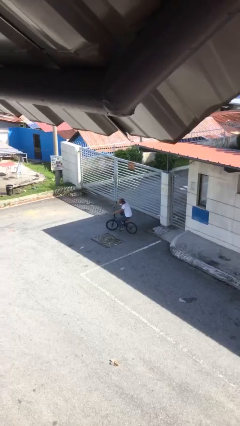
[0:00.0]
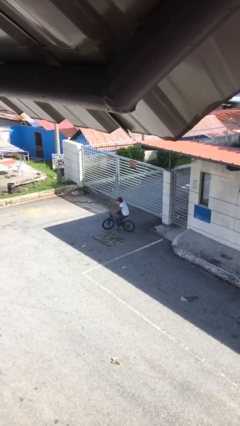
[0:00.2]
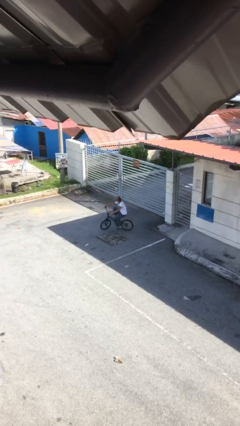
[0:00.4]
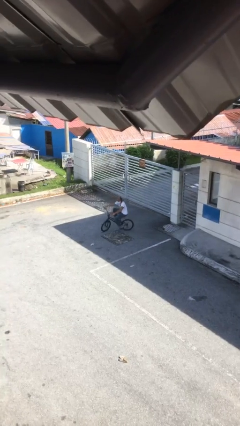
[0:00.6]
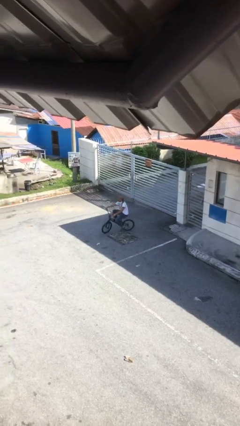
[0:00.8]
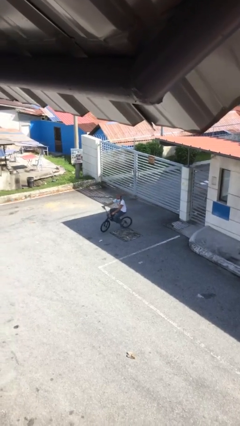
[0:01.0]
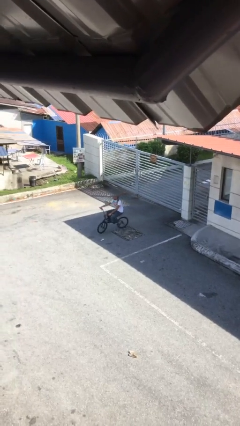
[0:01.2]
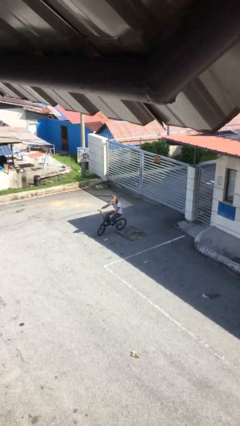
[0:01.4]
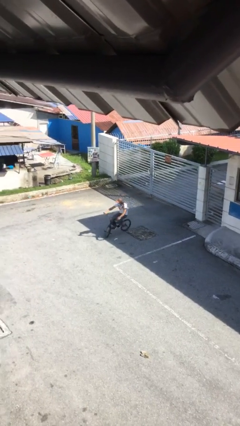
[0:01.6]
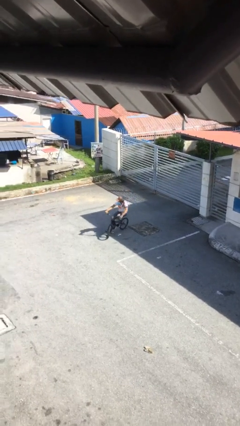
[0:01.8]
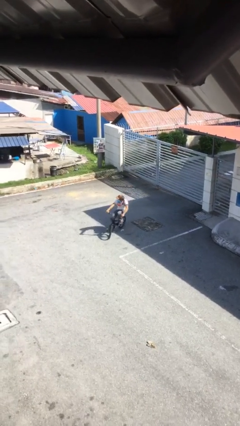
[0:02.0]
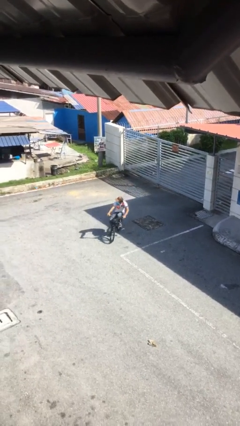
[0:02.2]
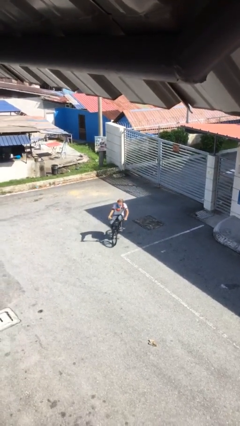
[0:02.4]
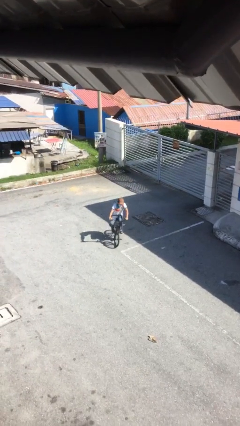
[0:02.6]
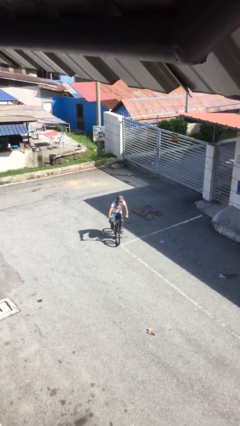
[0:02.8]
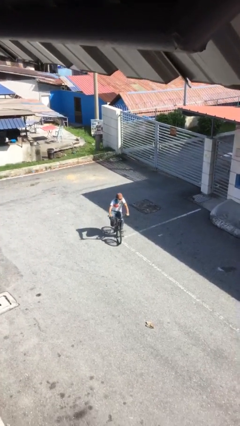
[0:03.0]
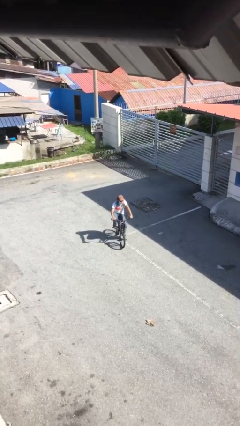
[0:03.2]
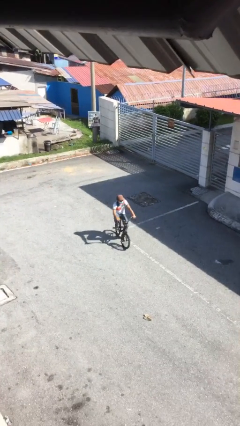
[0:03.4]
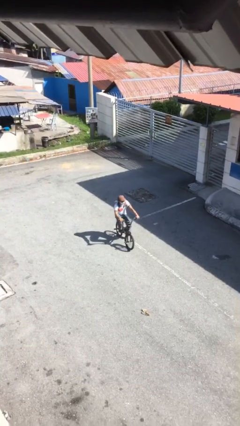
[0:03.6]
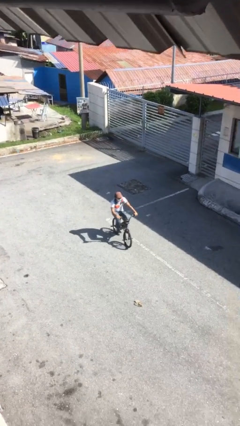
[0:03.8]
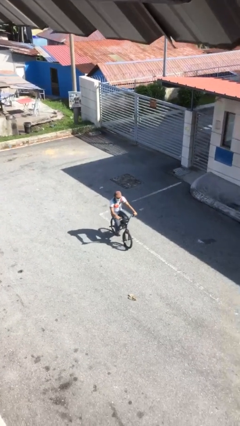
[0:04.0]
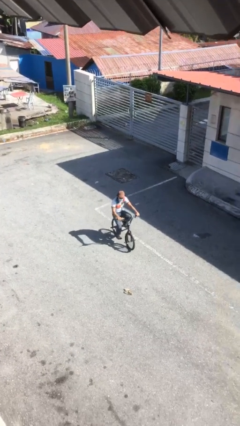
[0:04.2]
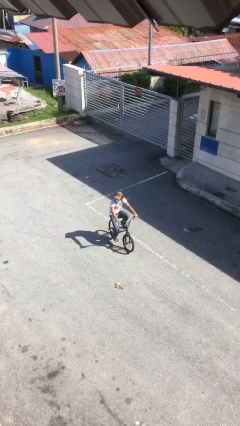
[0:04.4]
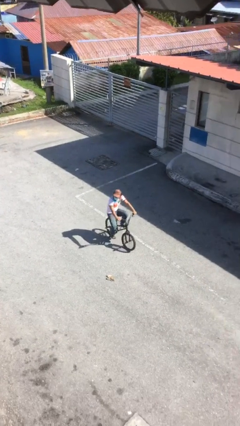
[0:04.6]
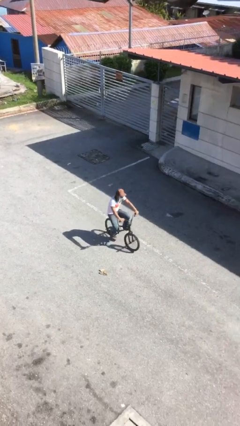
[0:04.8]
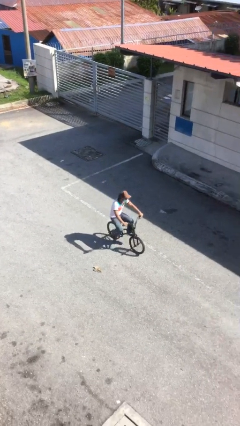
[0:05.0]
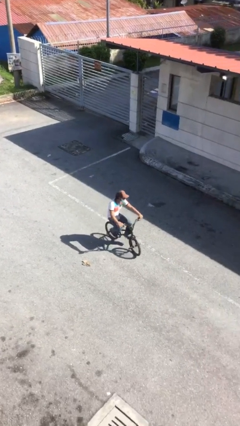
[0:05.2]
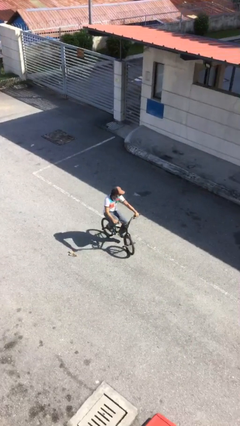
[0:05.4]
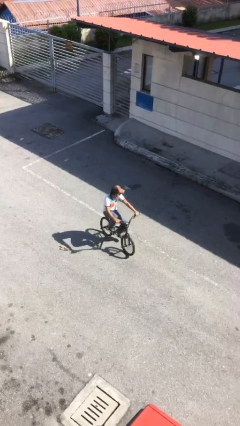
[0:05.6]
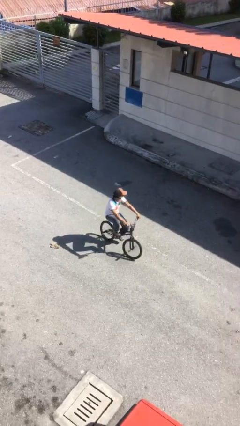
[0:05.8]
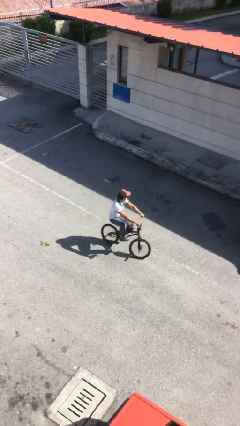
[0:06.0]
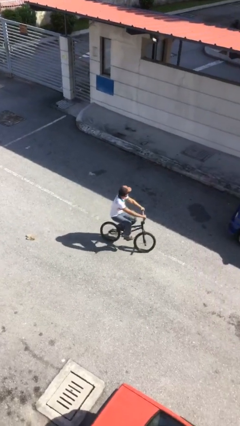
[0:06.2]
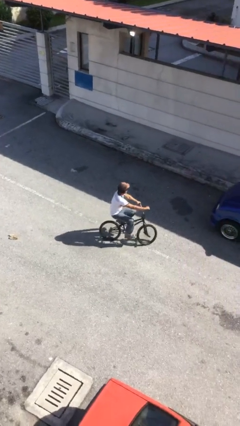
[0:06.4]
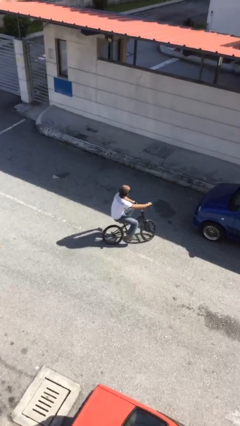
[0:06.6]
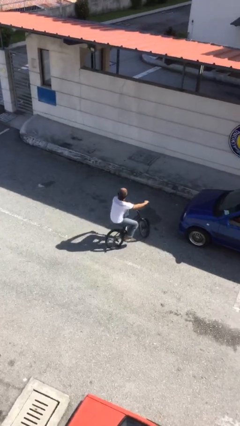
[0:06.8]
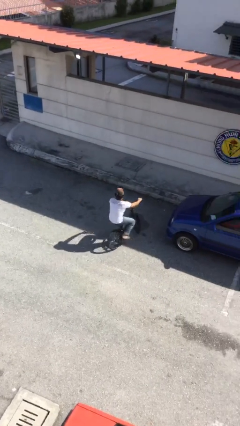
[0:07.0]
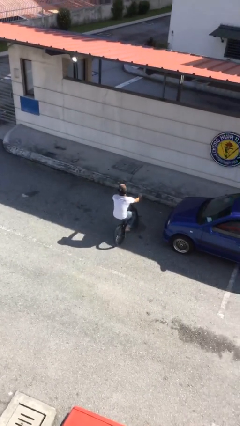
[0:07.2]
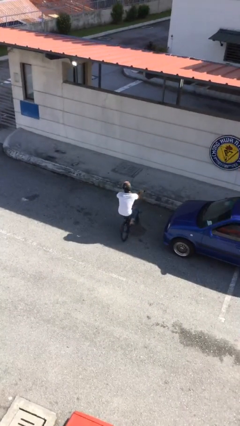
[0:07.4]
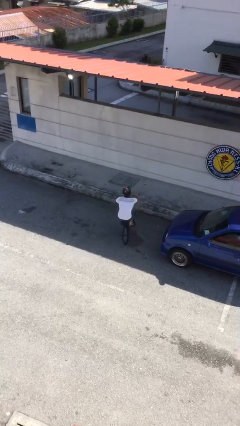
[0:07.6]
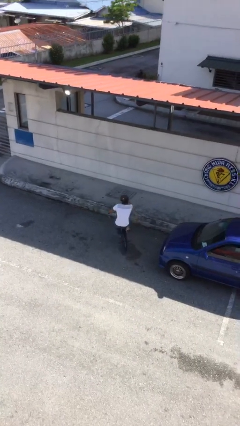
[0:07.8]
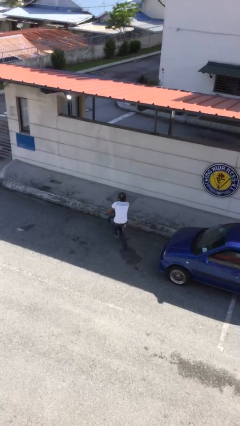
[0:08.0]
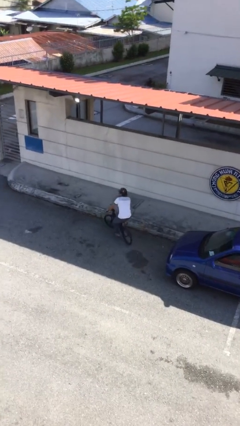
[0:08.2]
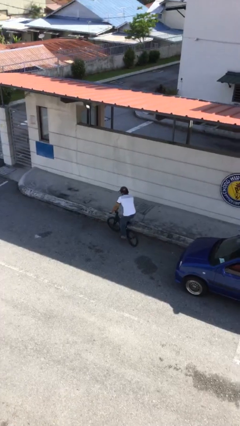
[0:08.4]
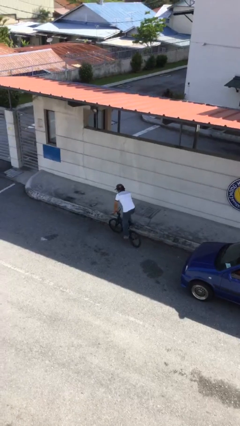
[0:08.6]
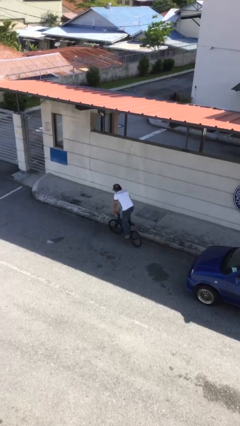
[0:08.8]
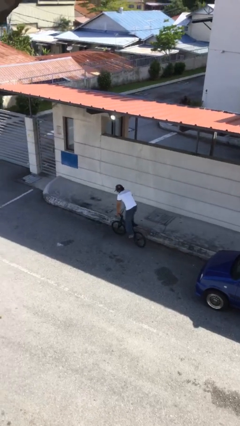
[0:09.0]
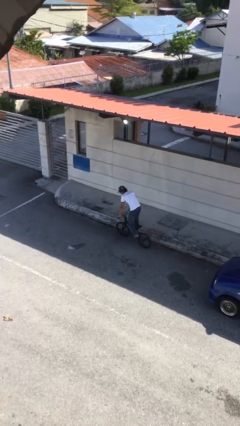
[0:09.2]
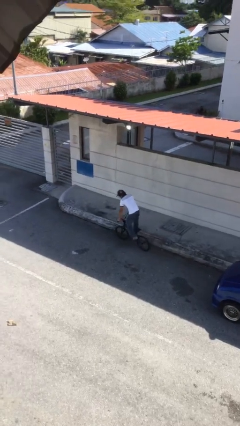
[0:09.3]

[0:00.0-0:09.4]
person rides bicycle

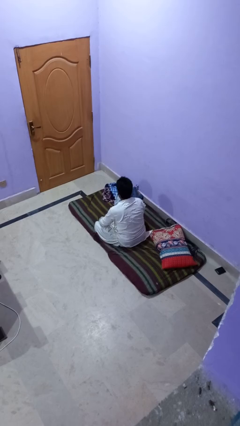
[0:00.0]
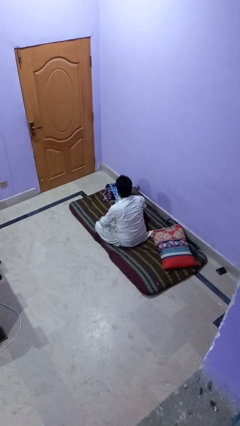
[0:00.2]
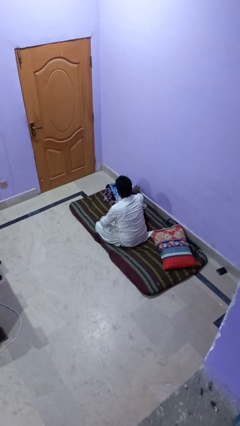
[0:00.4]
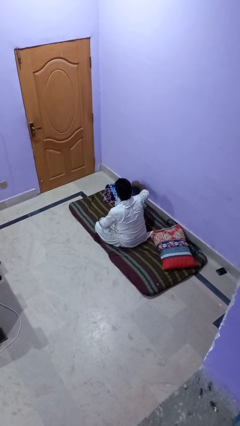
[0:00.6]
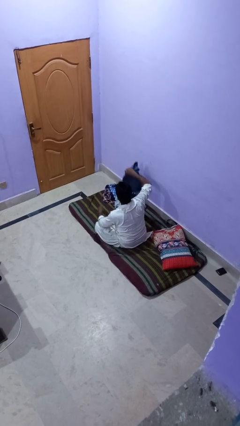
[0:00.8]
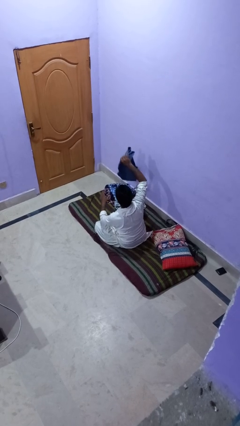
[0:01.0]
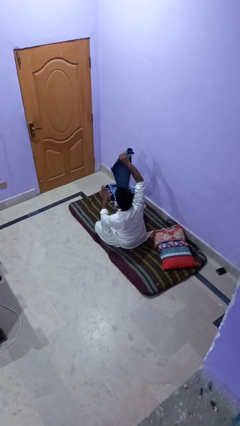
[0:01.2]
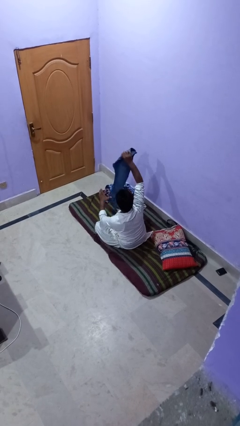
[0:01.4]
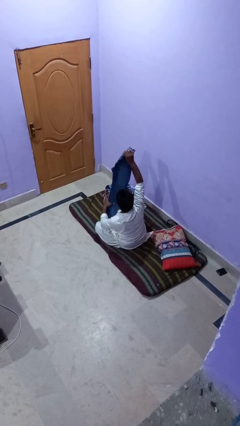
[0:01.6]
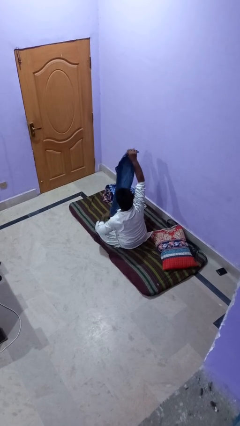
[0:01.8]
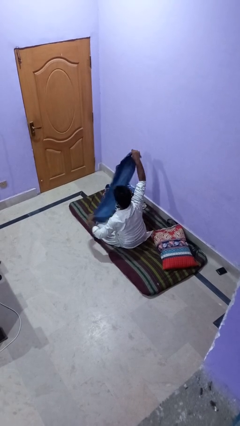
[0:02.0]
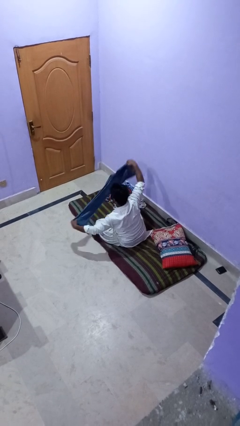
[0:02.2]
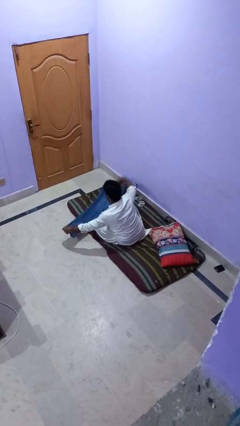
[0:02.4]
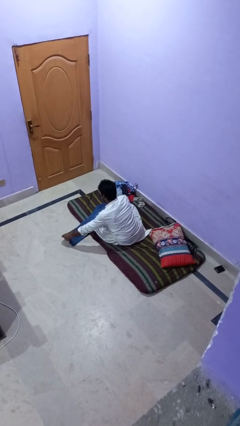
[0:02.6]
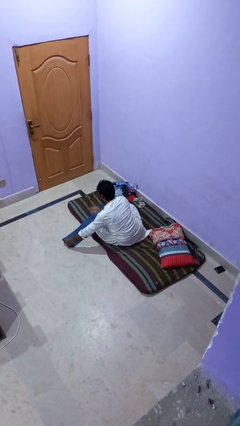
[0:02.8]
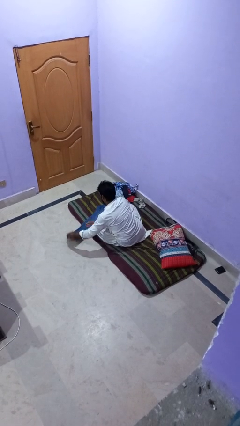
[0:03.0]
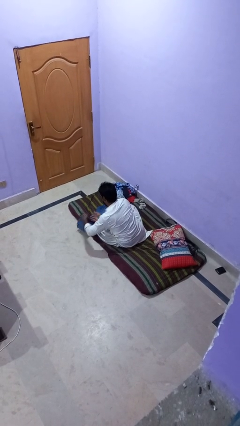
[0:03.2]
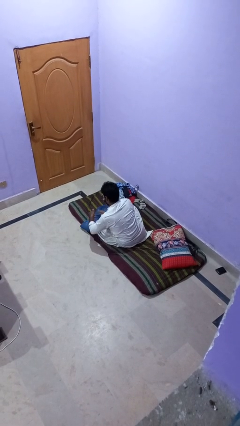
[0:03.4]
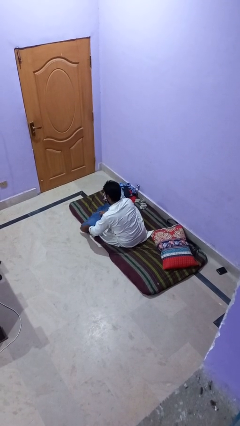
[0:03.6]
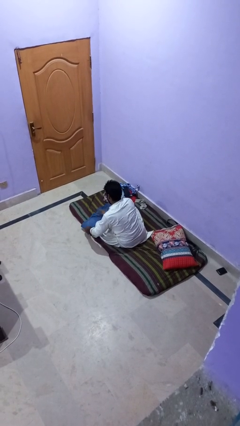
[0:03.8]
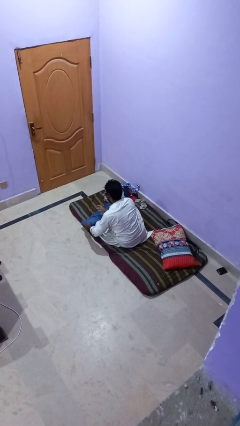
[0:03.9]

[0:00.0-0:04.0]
person folds pants

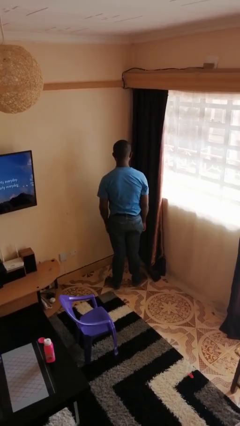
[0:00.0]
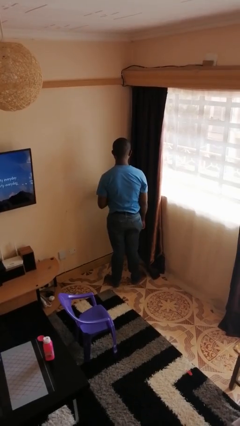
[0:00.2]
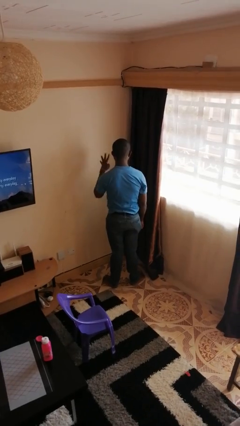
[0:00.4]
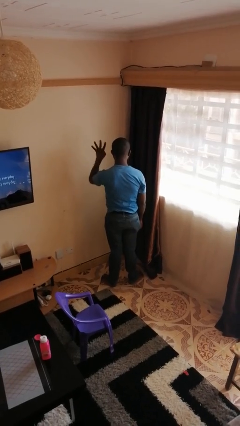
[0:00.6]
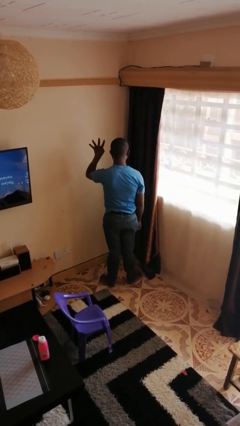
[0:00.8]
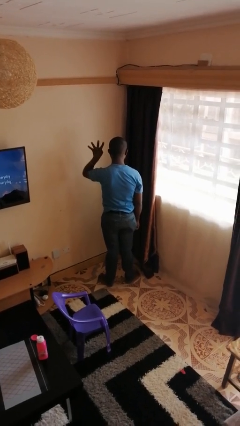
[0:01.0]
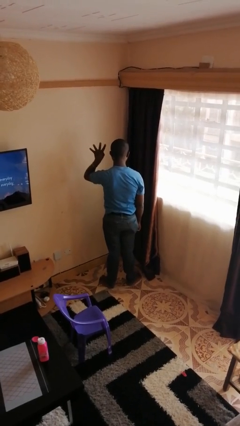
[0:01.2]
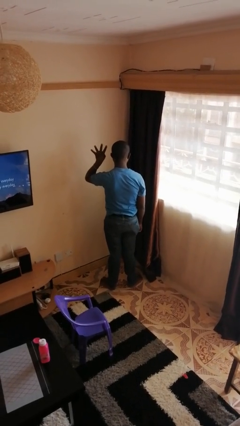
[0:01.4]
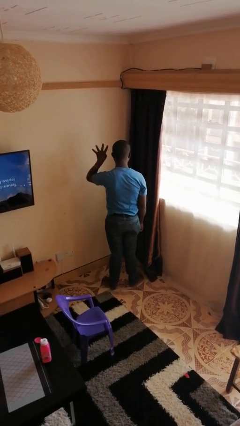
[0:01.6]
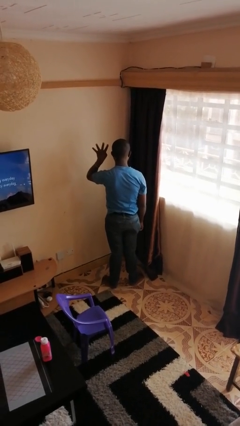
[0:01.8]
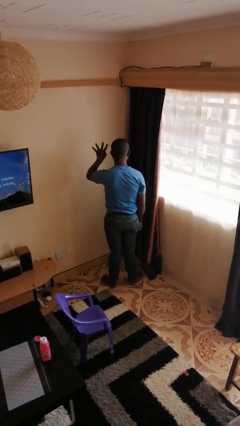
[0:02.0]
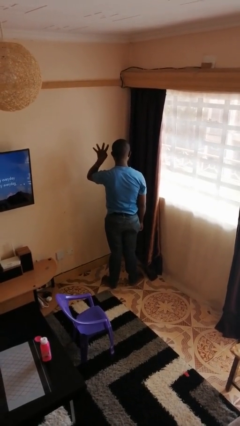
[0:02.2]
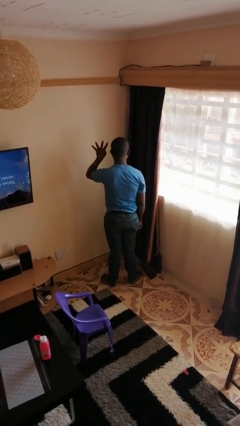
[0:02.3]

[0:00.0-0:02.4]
person gestures number four

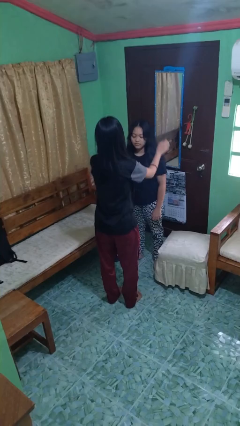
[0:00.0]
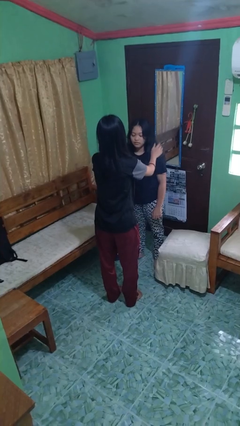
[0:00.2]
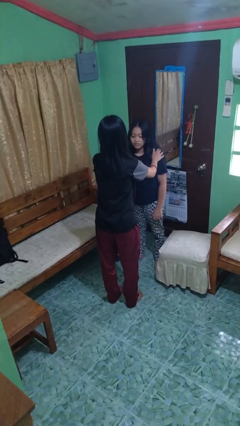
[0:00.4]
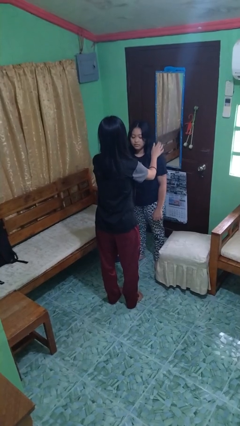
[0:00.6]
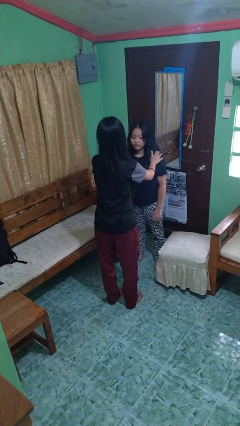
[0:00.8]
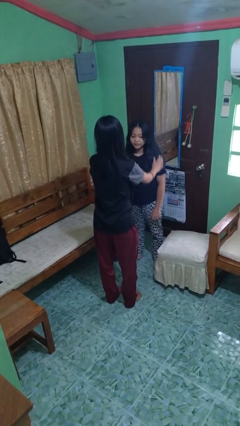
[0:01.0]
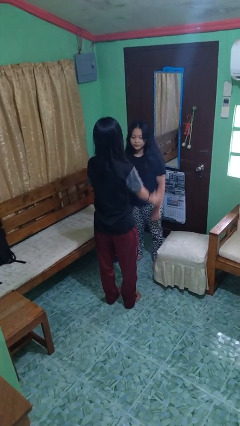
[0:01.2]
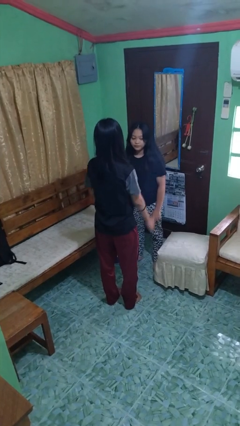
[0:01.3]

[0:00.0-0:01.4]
person pounds shoulders of person

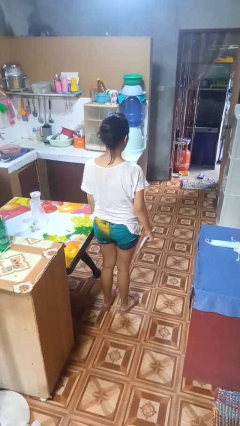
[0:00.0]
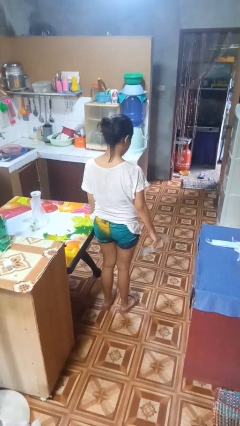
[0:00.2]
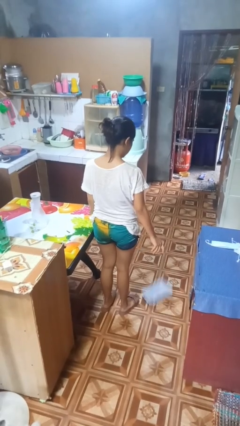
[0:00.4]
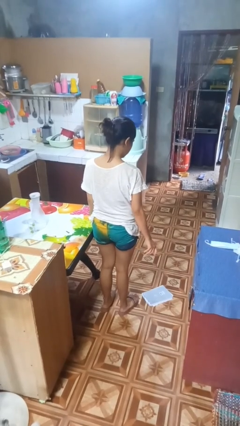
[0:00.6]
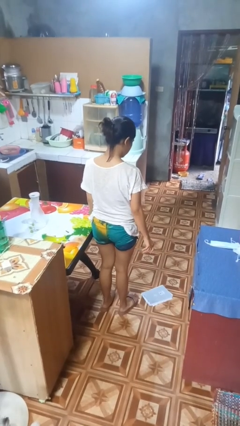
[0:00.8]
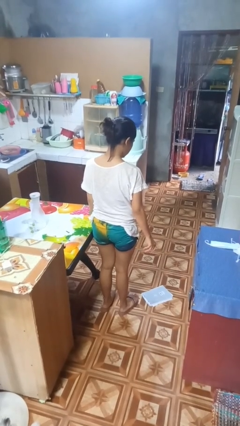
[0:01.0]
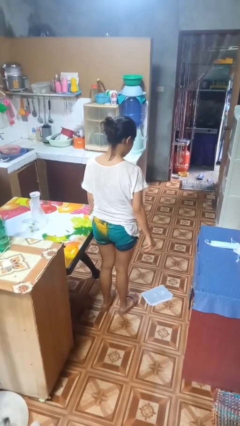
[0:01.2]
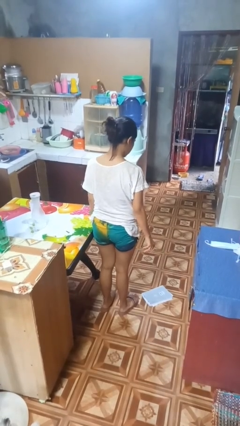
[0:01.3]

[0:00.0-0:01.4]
person drops object
